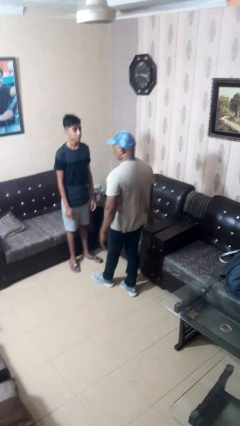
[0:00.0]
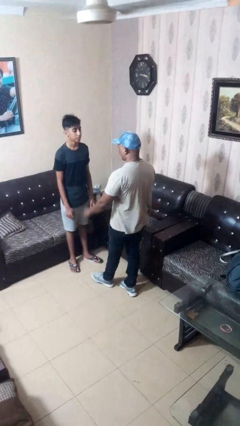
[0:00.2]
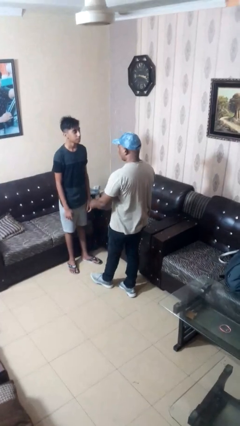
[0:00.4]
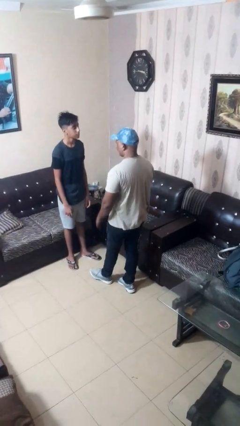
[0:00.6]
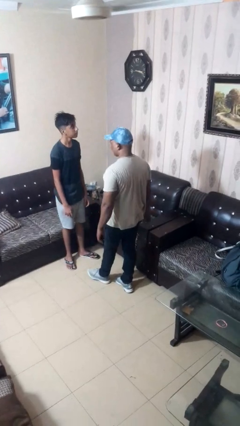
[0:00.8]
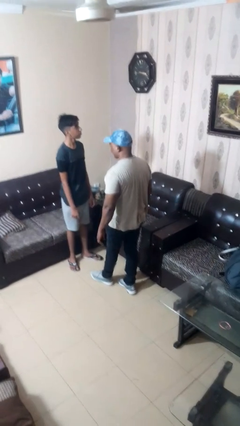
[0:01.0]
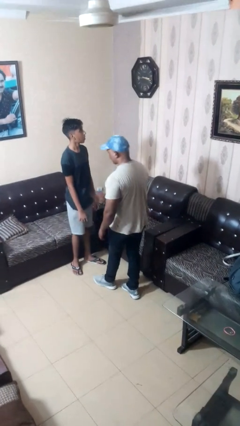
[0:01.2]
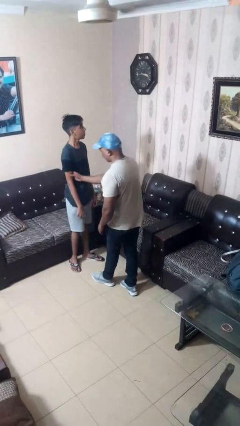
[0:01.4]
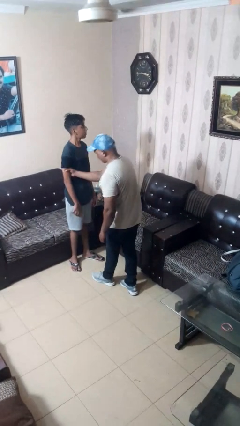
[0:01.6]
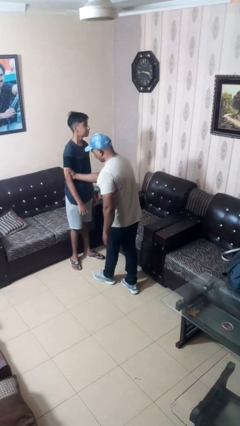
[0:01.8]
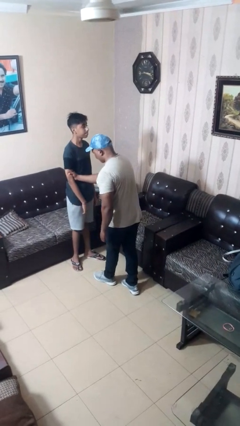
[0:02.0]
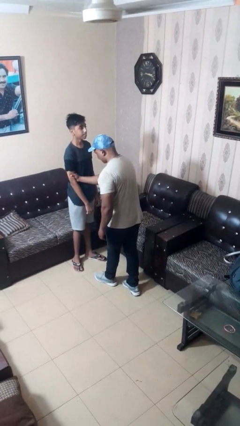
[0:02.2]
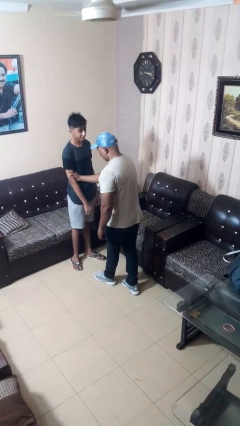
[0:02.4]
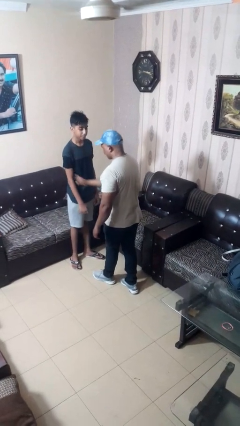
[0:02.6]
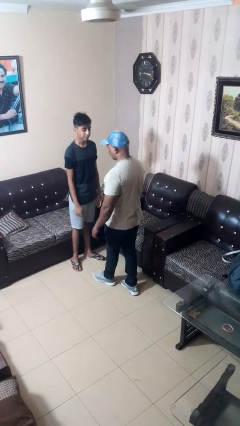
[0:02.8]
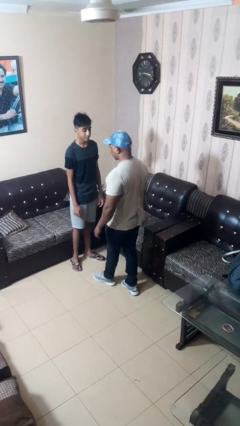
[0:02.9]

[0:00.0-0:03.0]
person grabs person by bicep

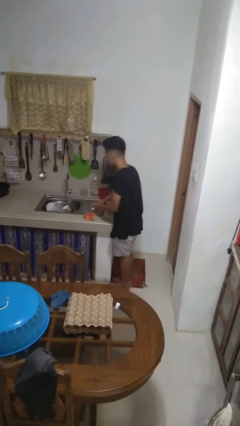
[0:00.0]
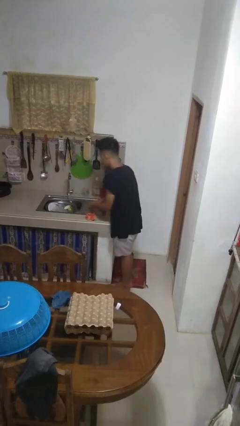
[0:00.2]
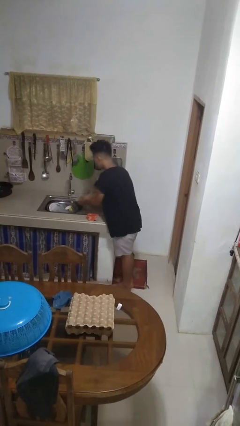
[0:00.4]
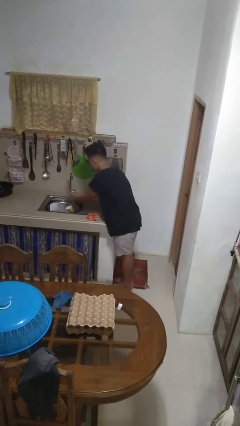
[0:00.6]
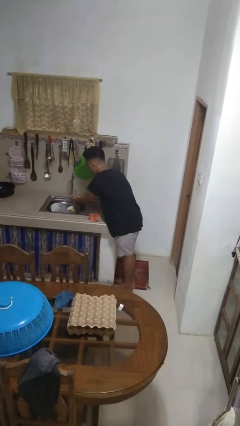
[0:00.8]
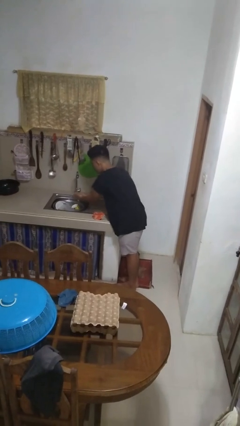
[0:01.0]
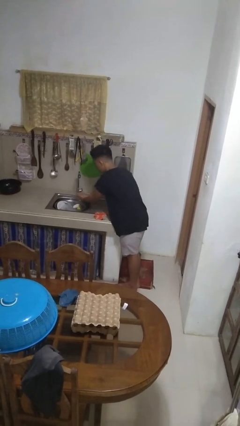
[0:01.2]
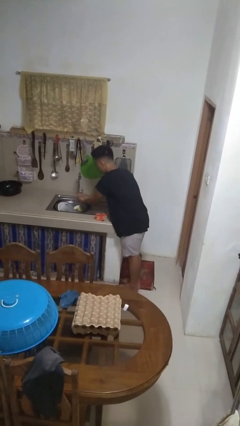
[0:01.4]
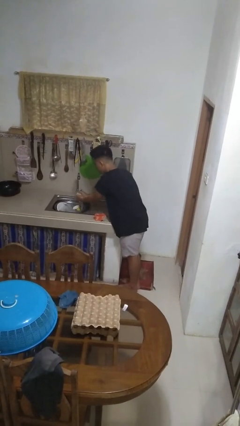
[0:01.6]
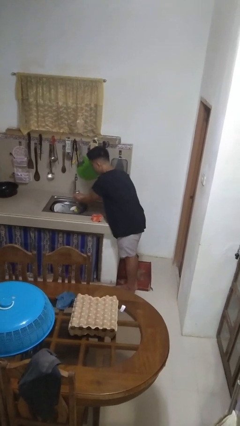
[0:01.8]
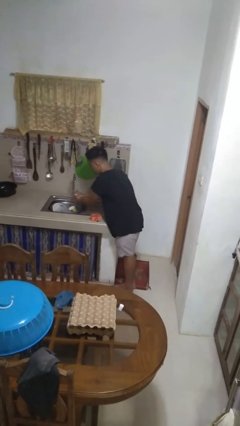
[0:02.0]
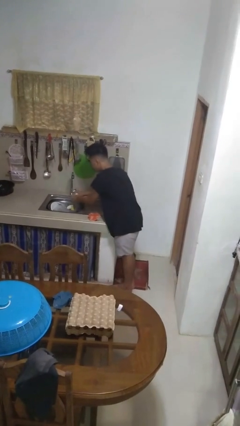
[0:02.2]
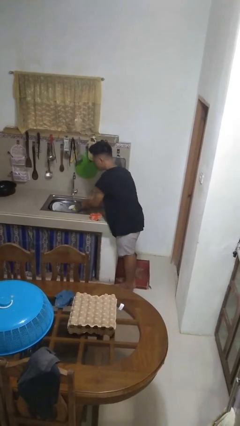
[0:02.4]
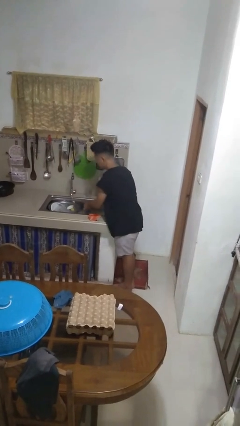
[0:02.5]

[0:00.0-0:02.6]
person washes hands

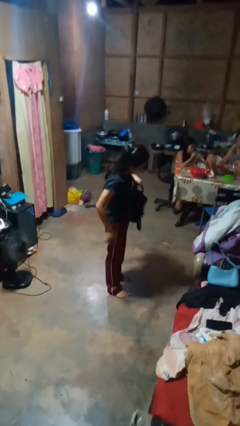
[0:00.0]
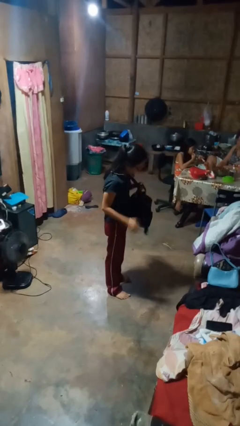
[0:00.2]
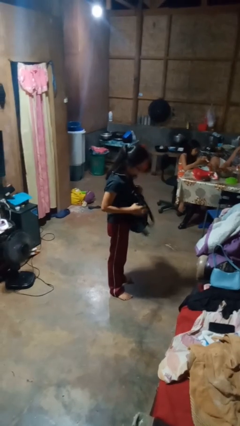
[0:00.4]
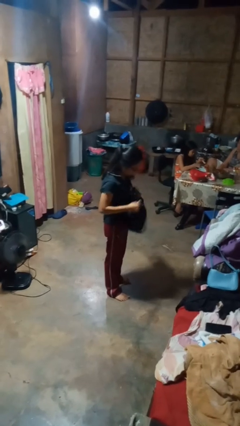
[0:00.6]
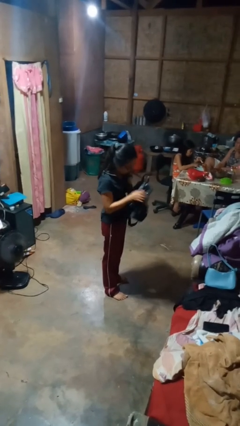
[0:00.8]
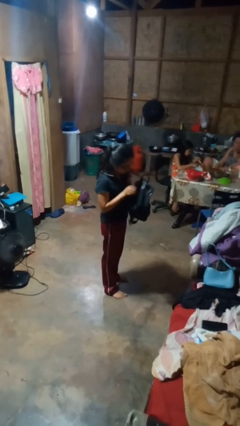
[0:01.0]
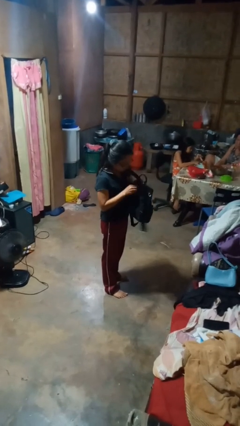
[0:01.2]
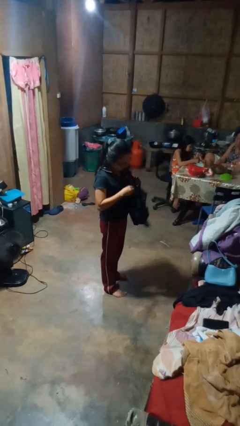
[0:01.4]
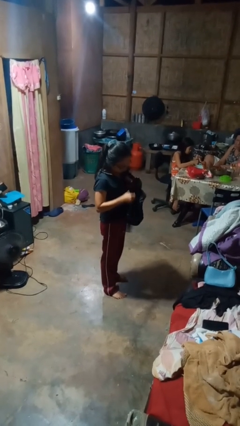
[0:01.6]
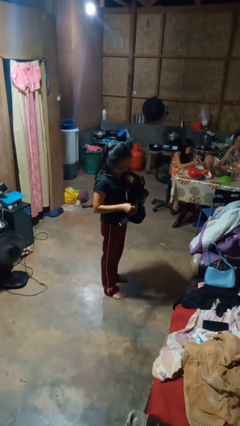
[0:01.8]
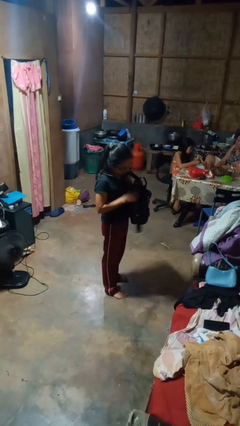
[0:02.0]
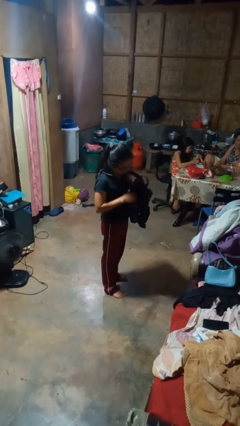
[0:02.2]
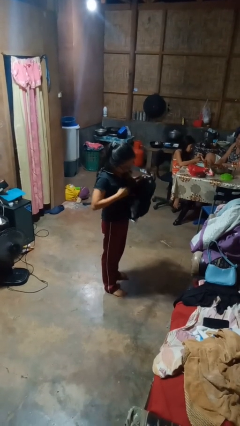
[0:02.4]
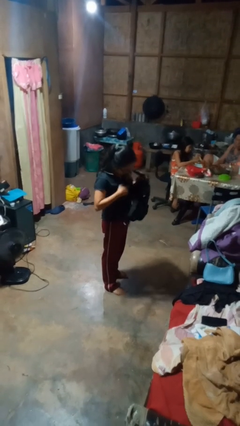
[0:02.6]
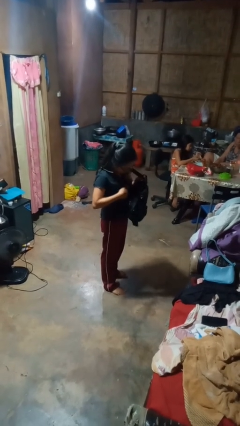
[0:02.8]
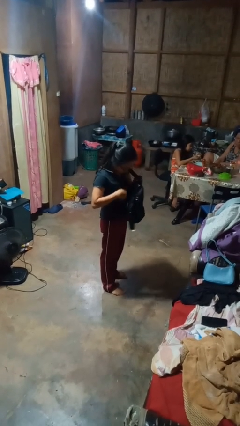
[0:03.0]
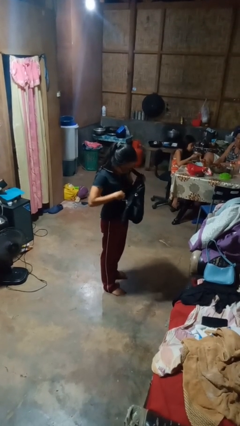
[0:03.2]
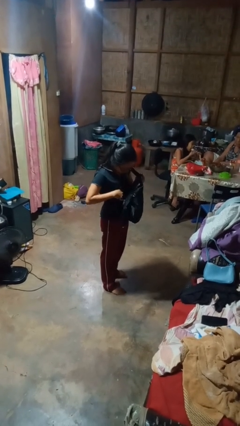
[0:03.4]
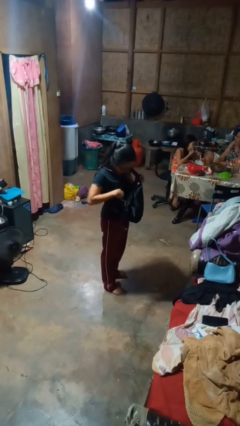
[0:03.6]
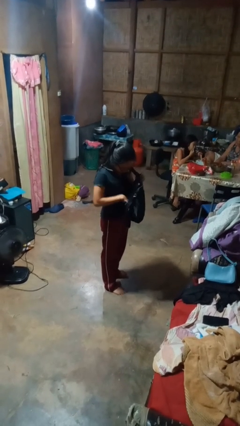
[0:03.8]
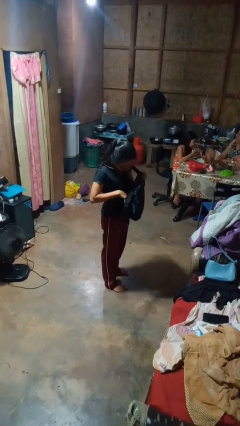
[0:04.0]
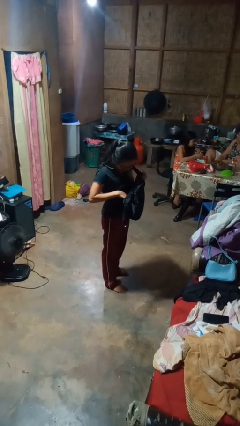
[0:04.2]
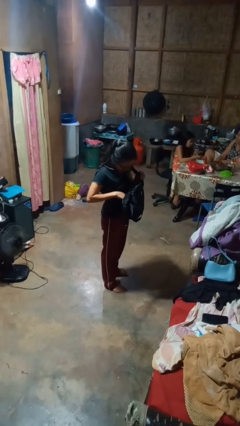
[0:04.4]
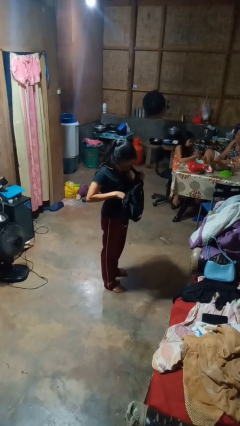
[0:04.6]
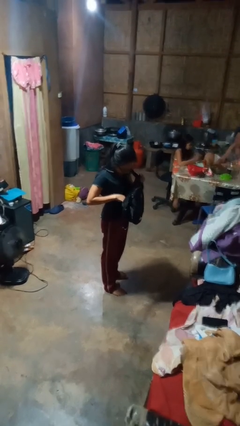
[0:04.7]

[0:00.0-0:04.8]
person searches in backpack

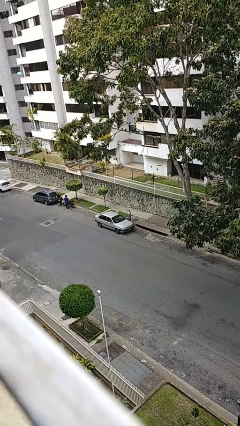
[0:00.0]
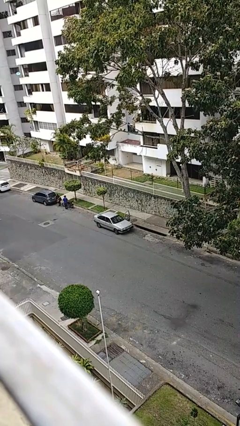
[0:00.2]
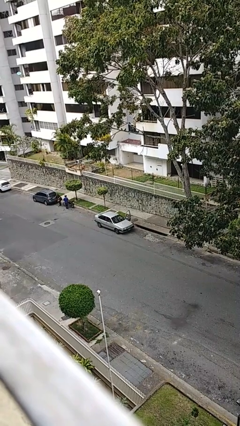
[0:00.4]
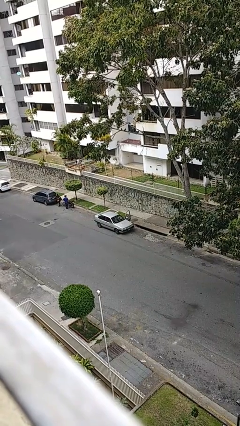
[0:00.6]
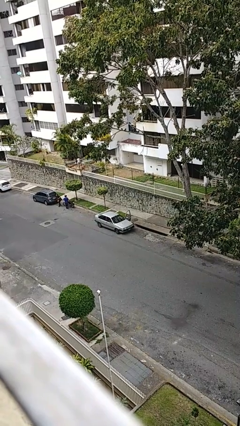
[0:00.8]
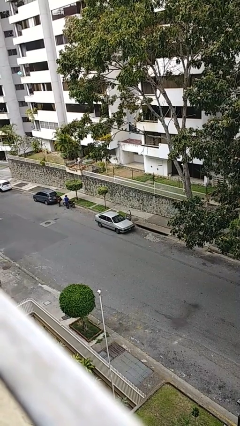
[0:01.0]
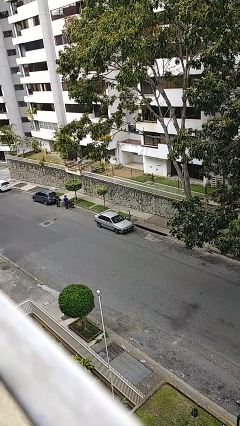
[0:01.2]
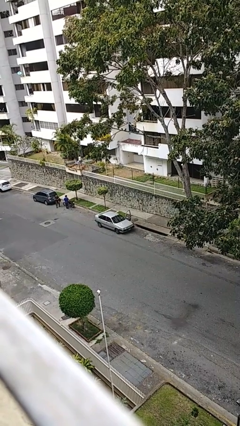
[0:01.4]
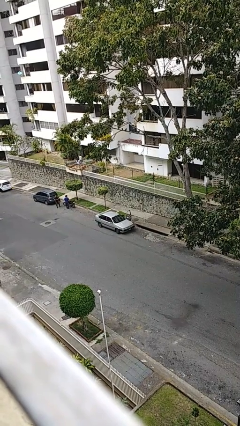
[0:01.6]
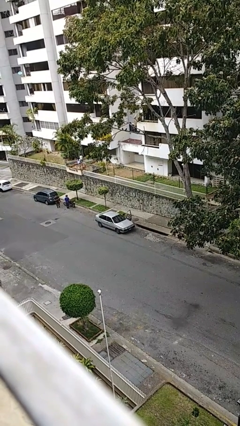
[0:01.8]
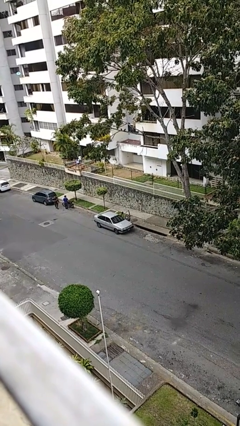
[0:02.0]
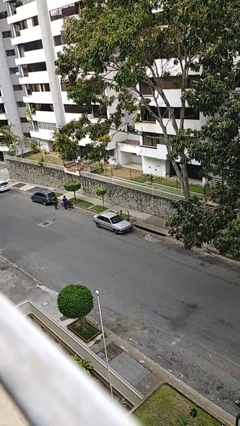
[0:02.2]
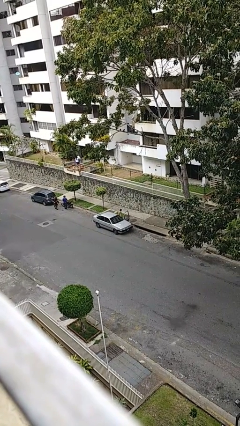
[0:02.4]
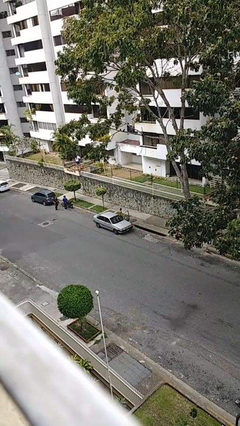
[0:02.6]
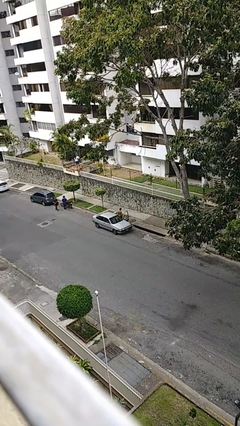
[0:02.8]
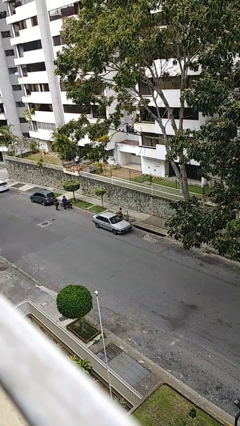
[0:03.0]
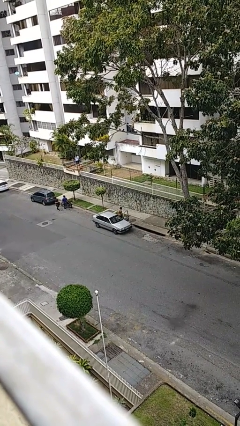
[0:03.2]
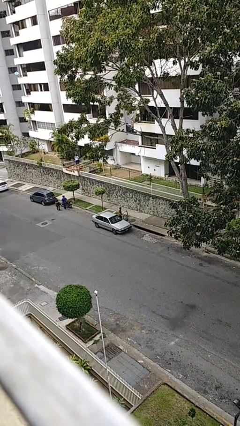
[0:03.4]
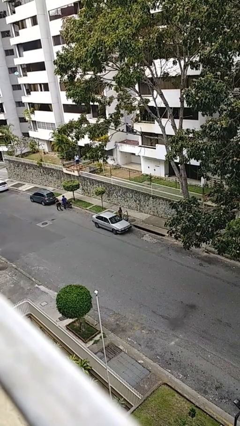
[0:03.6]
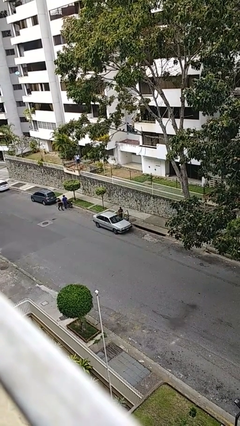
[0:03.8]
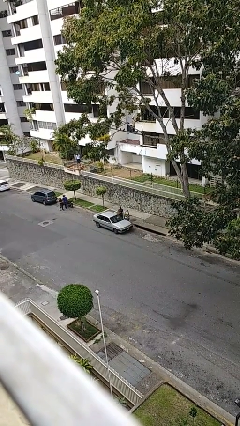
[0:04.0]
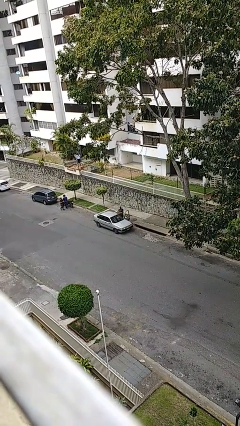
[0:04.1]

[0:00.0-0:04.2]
person exits car

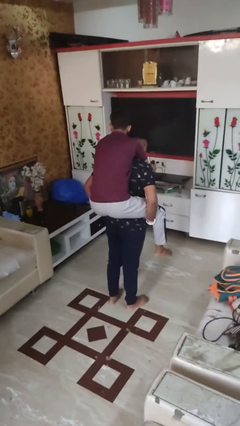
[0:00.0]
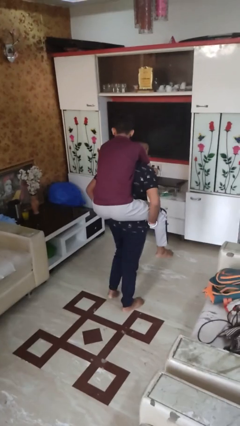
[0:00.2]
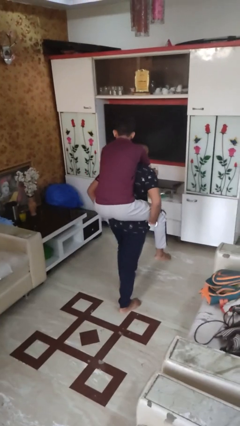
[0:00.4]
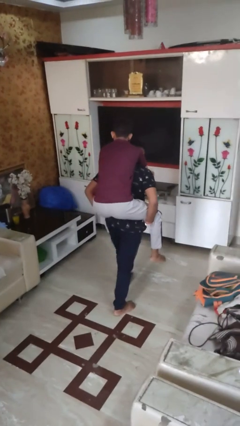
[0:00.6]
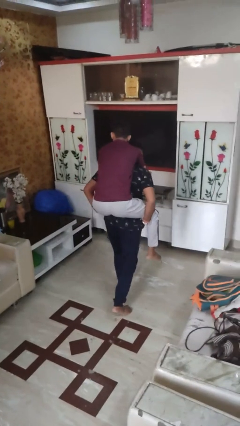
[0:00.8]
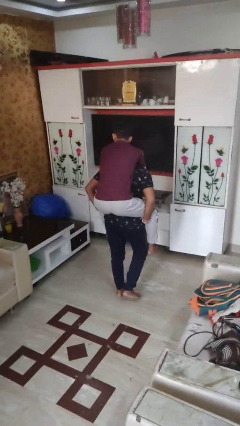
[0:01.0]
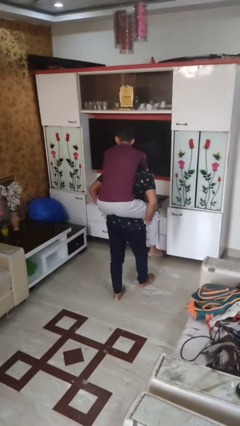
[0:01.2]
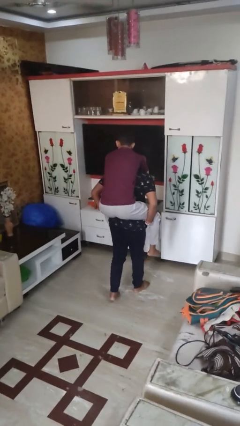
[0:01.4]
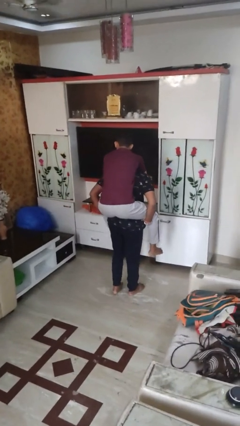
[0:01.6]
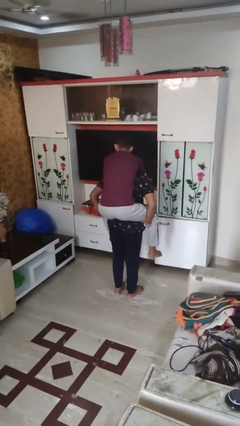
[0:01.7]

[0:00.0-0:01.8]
person carries person on back

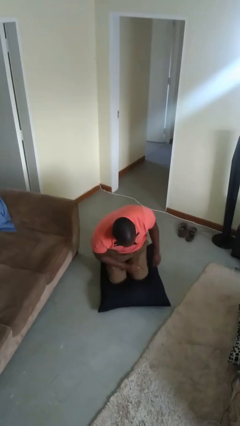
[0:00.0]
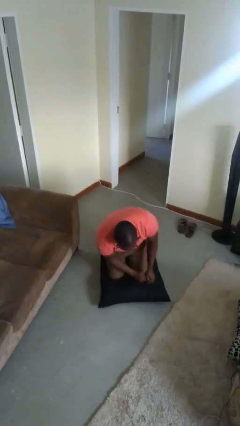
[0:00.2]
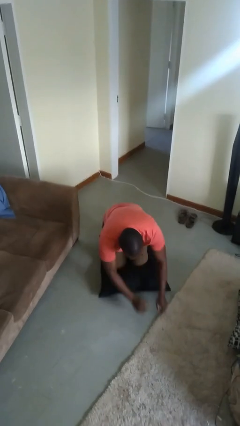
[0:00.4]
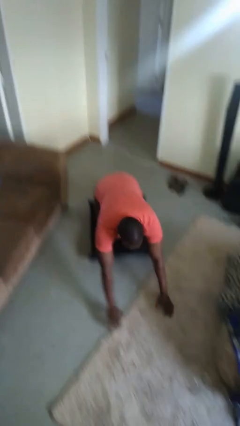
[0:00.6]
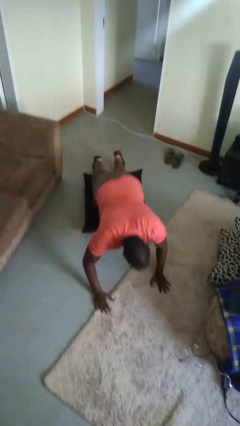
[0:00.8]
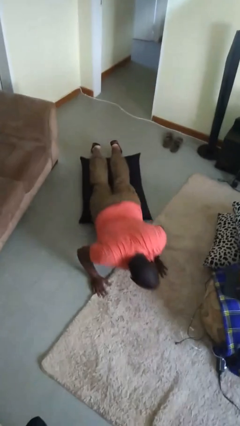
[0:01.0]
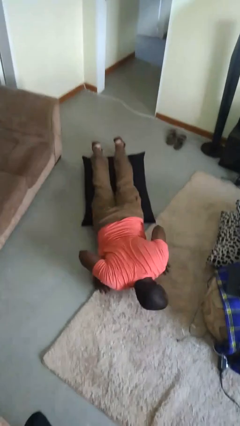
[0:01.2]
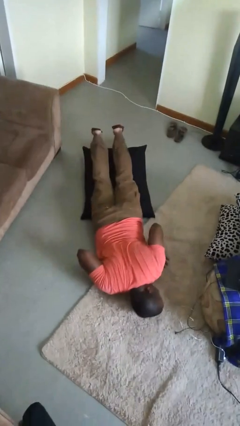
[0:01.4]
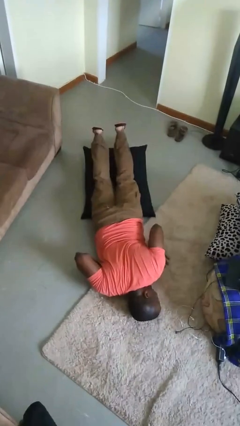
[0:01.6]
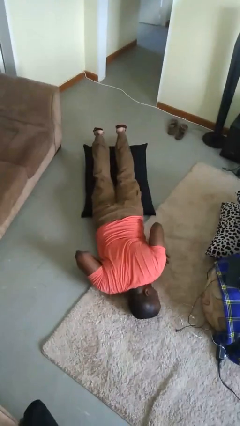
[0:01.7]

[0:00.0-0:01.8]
person lies down on floor
